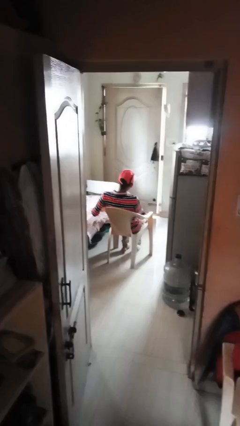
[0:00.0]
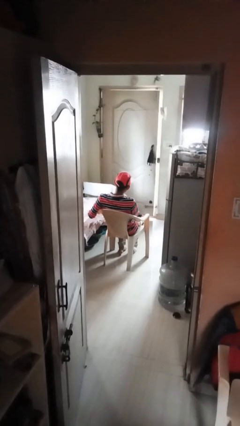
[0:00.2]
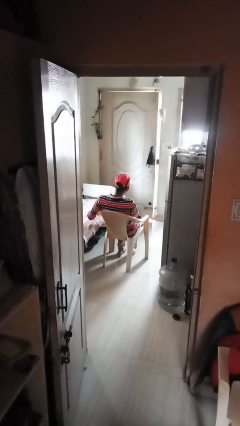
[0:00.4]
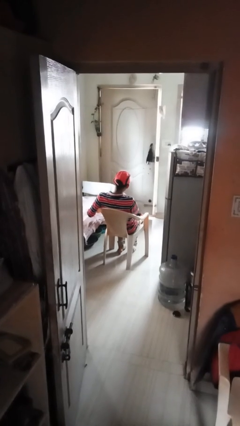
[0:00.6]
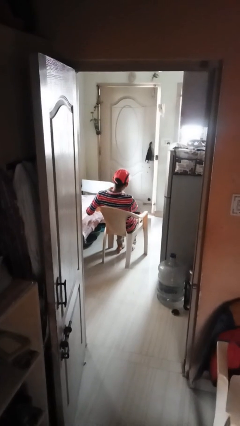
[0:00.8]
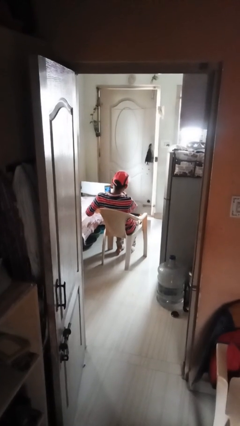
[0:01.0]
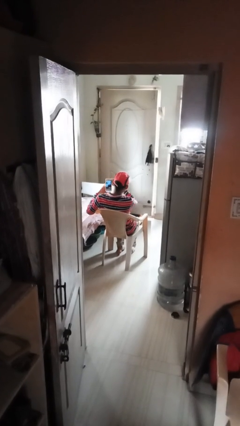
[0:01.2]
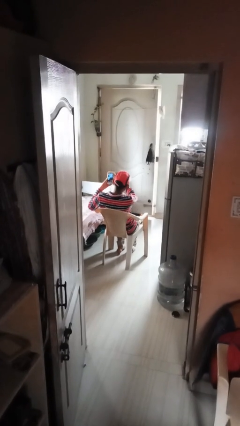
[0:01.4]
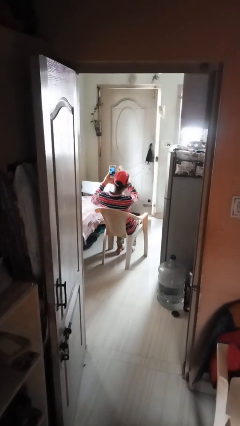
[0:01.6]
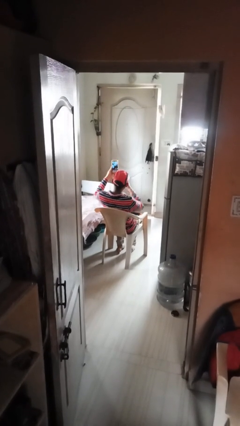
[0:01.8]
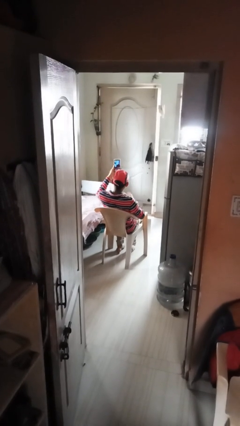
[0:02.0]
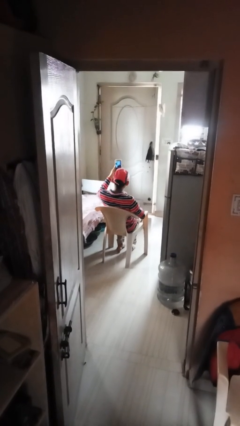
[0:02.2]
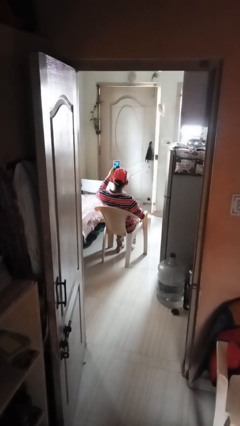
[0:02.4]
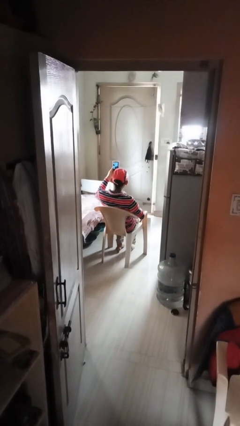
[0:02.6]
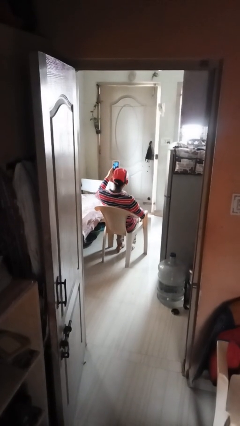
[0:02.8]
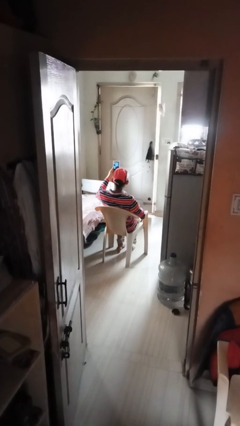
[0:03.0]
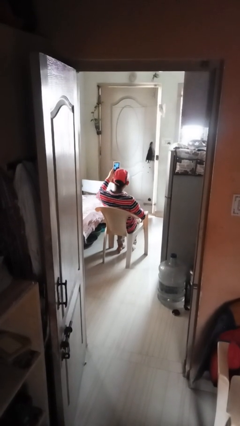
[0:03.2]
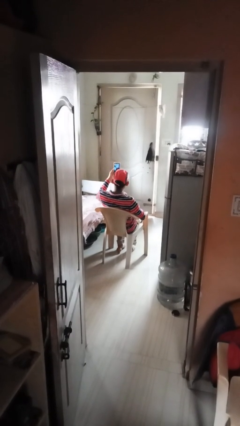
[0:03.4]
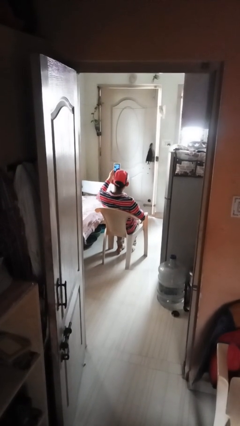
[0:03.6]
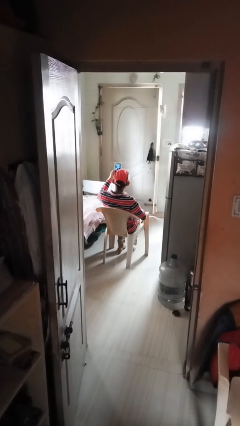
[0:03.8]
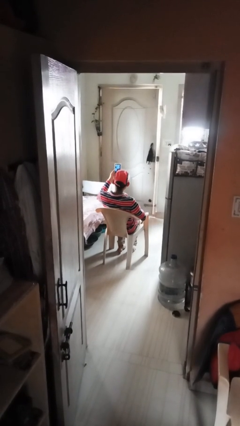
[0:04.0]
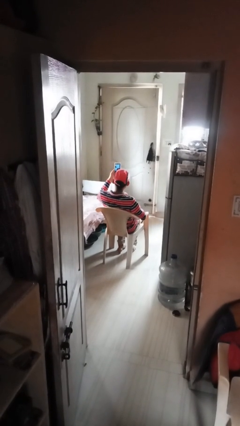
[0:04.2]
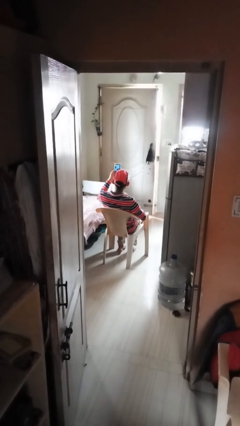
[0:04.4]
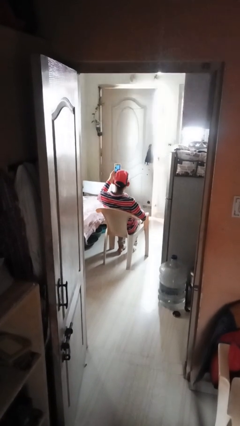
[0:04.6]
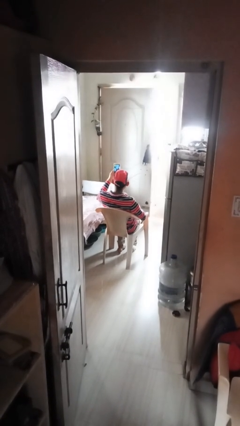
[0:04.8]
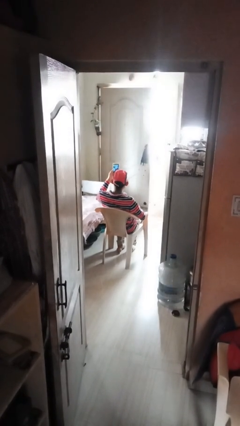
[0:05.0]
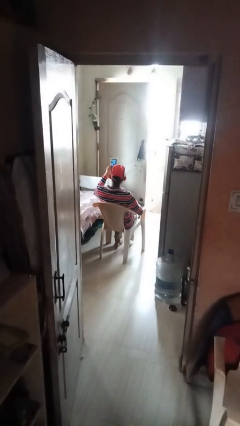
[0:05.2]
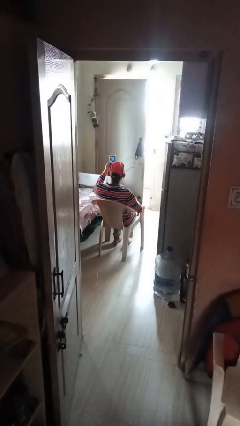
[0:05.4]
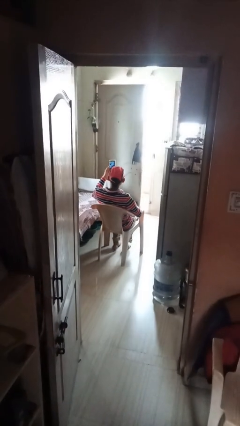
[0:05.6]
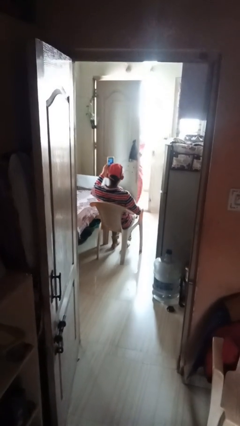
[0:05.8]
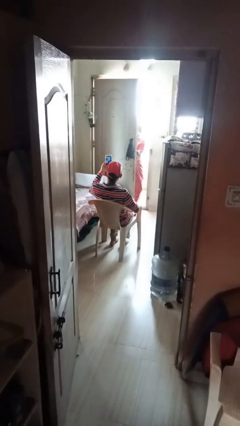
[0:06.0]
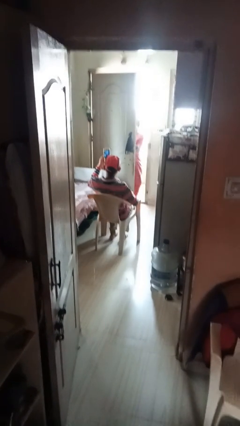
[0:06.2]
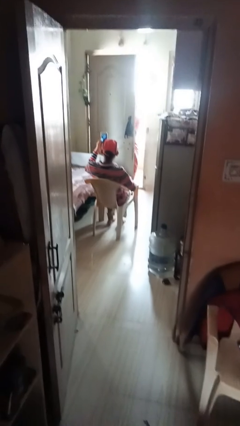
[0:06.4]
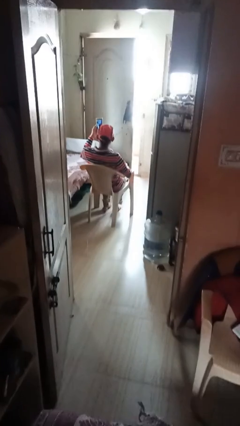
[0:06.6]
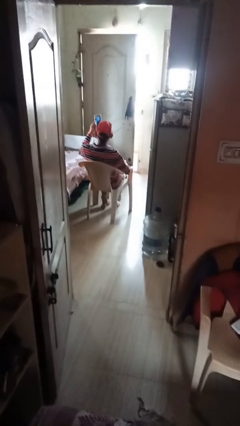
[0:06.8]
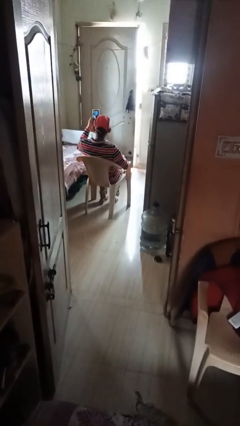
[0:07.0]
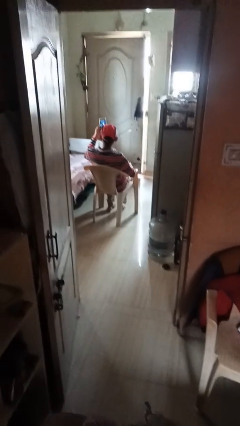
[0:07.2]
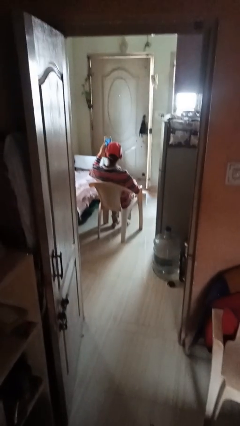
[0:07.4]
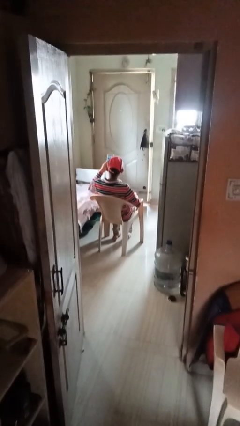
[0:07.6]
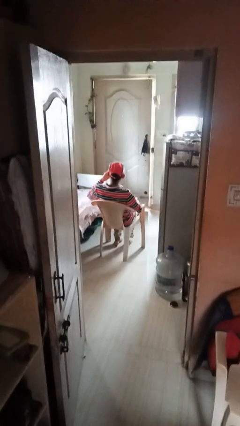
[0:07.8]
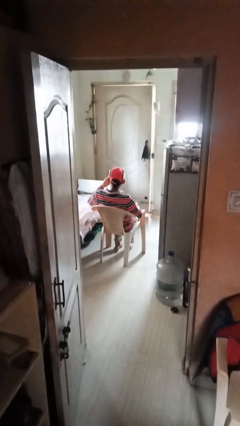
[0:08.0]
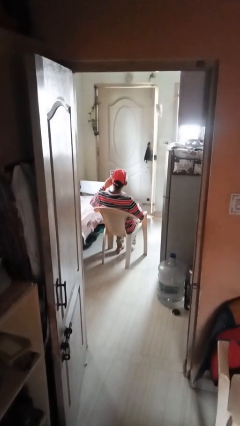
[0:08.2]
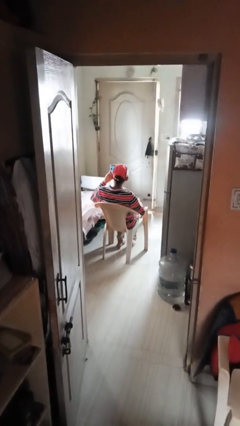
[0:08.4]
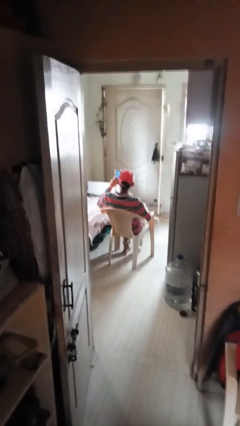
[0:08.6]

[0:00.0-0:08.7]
person takes phone from pocket

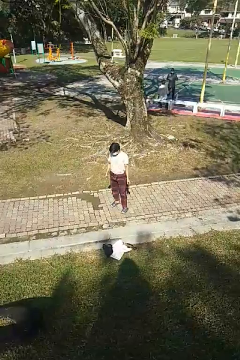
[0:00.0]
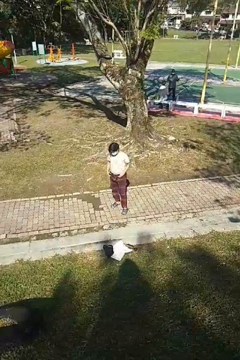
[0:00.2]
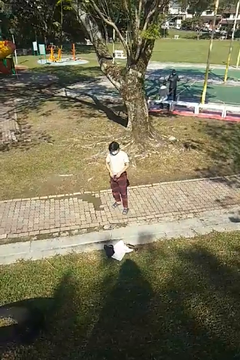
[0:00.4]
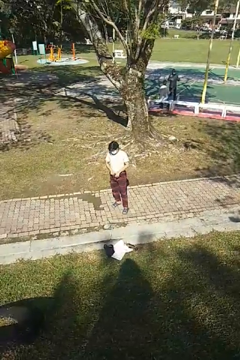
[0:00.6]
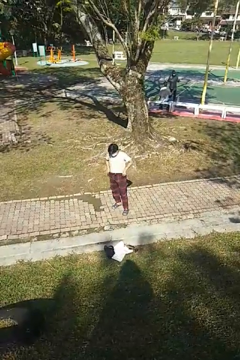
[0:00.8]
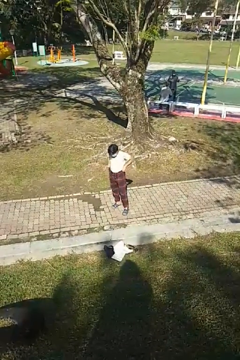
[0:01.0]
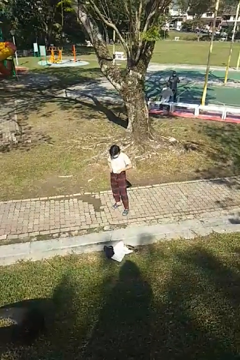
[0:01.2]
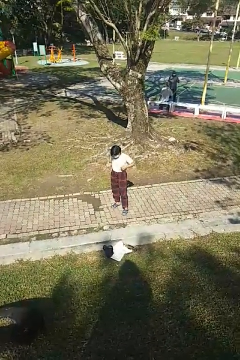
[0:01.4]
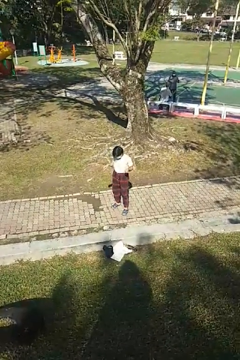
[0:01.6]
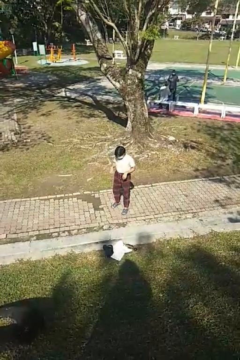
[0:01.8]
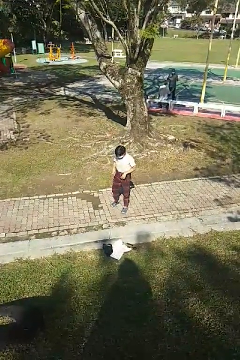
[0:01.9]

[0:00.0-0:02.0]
person hikes up pants

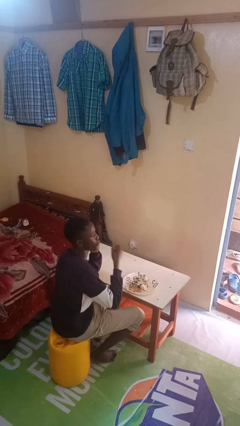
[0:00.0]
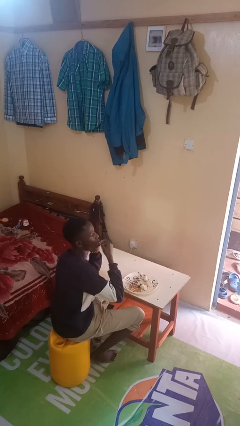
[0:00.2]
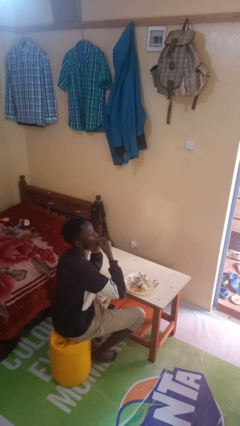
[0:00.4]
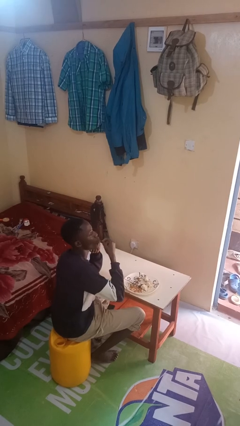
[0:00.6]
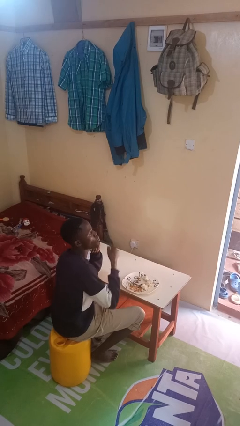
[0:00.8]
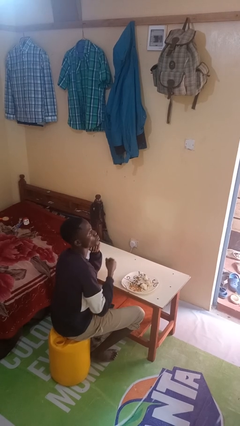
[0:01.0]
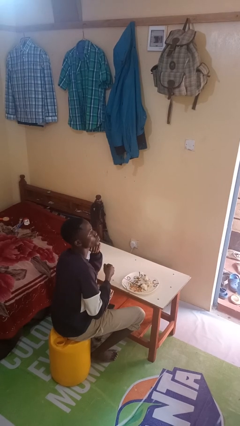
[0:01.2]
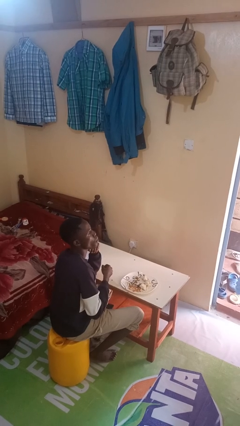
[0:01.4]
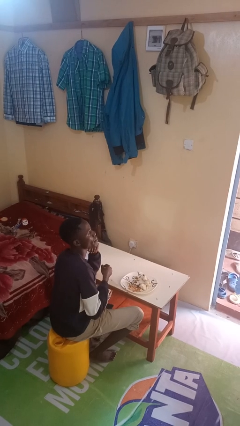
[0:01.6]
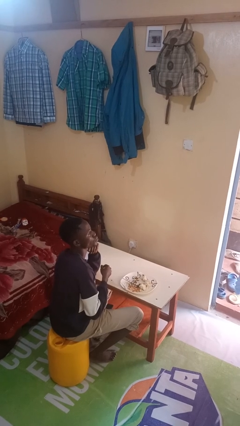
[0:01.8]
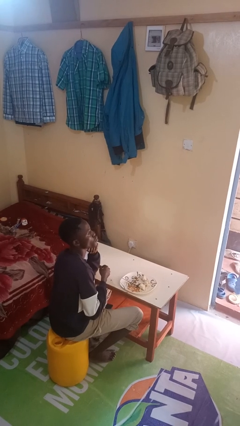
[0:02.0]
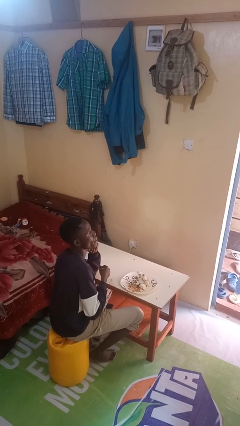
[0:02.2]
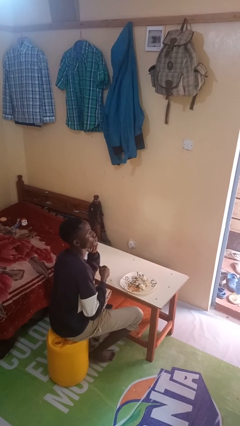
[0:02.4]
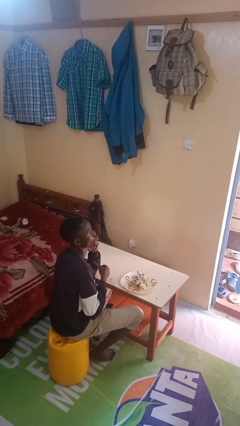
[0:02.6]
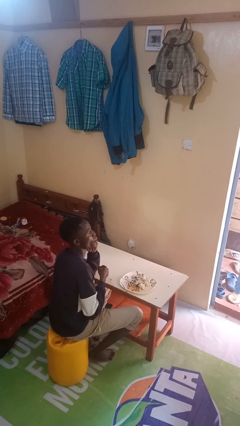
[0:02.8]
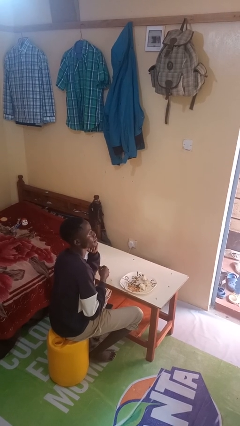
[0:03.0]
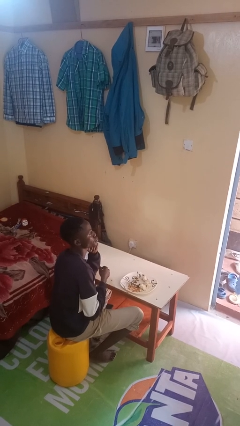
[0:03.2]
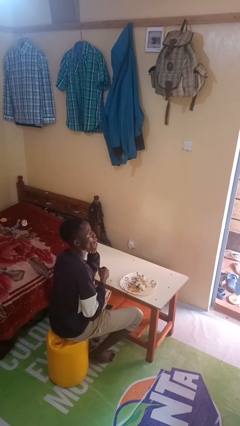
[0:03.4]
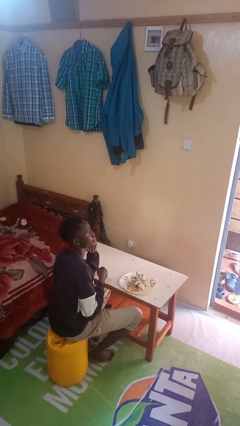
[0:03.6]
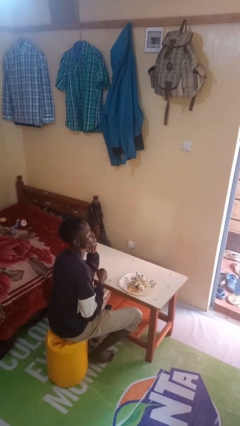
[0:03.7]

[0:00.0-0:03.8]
person eats with hands

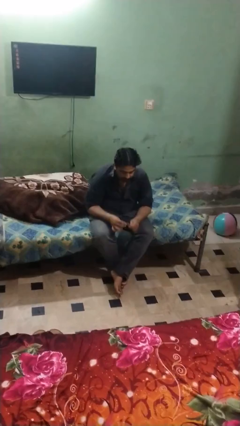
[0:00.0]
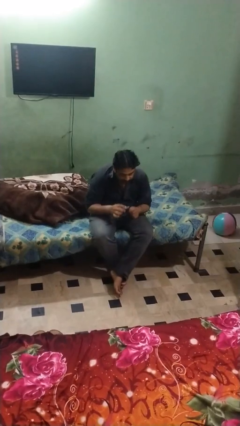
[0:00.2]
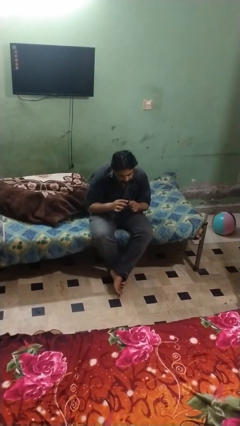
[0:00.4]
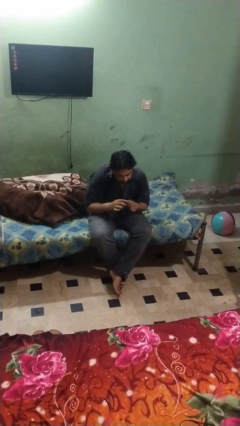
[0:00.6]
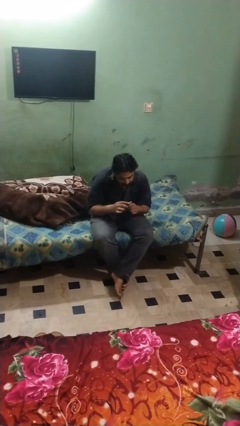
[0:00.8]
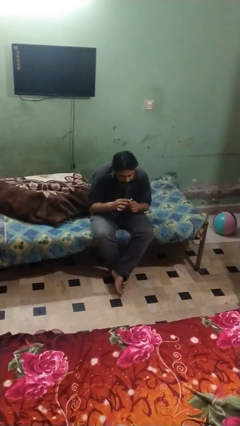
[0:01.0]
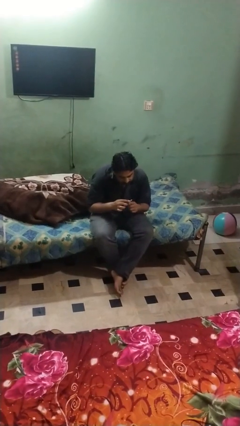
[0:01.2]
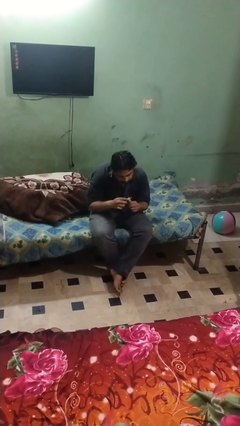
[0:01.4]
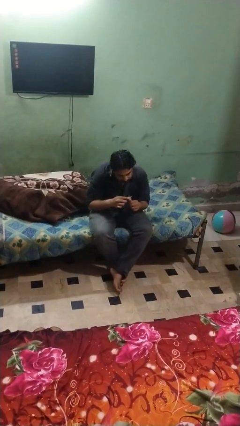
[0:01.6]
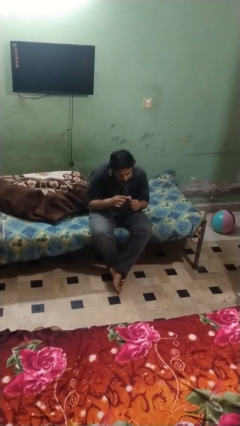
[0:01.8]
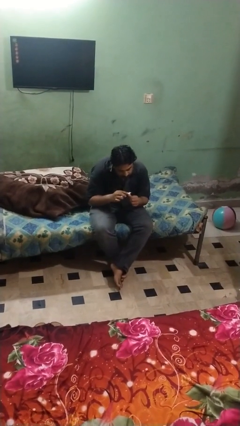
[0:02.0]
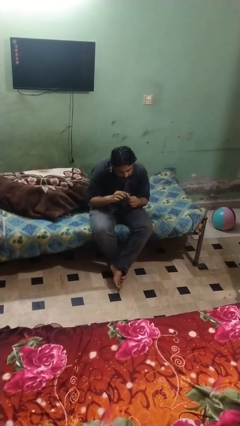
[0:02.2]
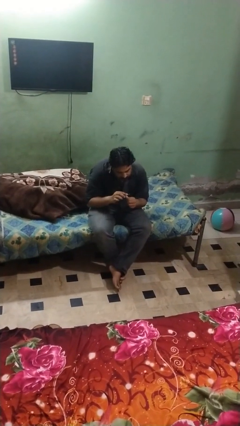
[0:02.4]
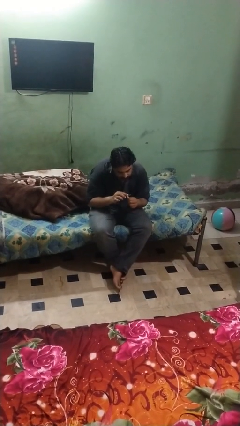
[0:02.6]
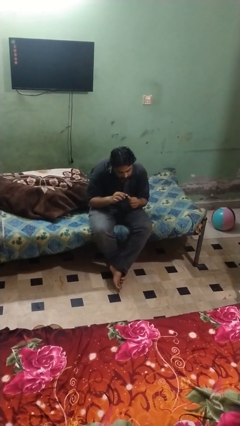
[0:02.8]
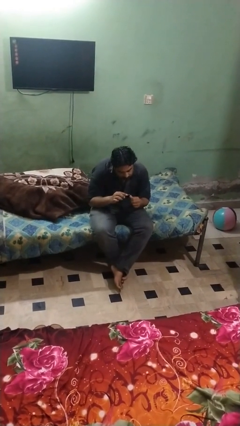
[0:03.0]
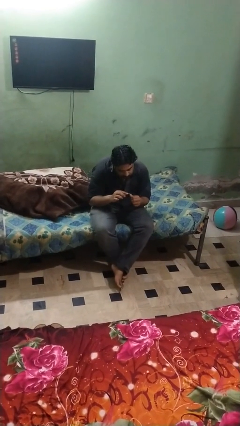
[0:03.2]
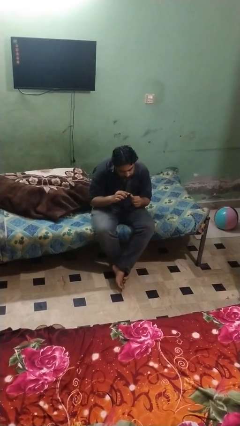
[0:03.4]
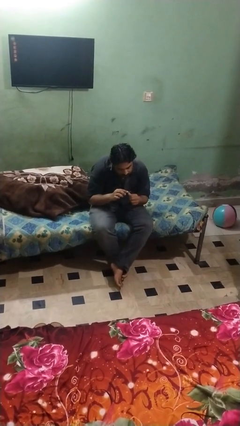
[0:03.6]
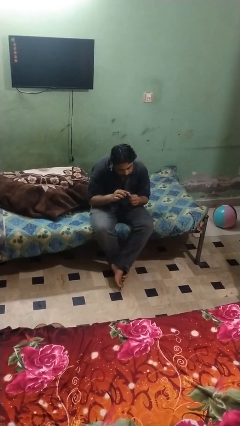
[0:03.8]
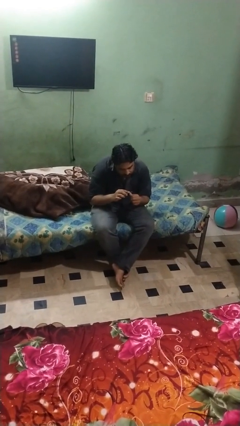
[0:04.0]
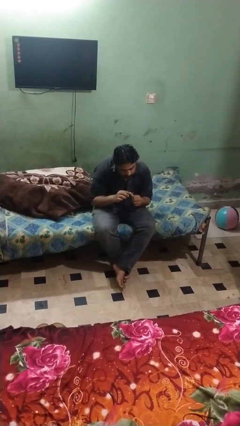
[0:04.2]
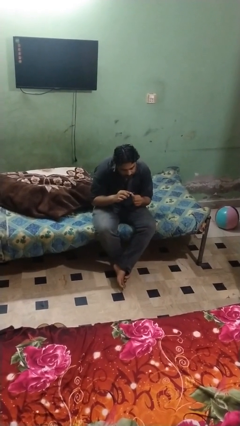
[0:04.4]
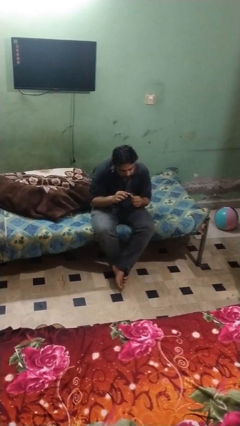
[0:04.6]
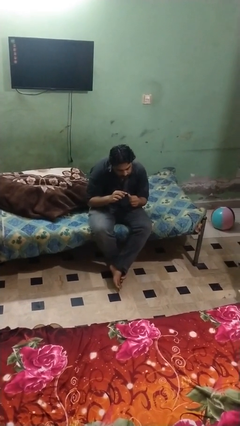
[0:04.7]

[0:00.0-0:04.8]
person files fingernails
